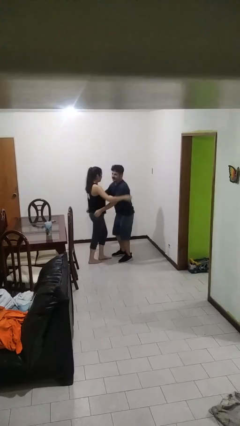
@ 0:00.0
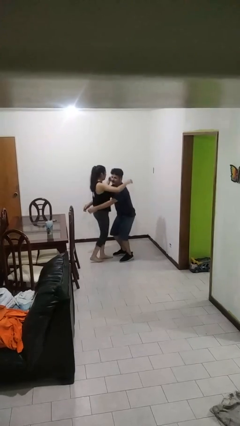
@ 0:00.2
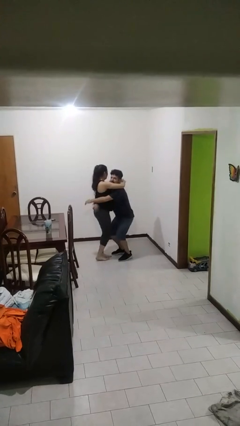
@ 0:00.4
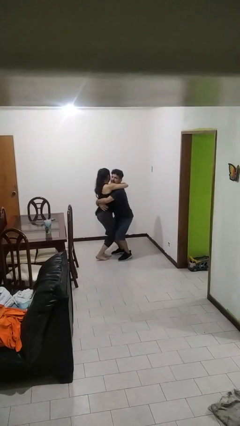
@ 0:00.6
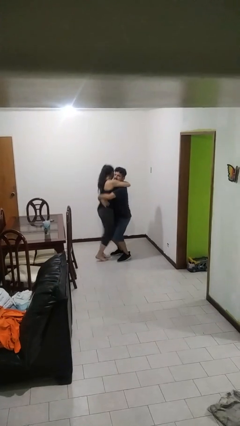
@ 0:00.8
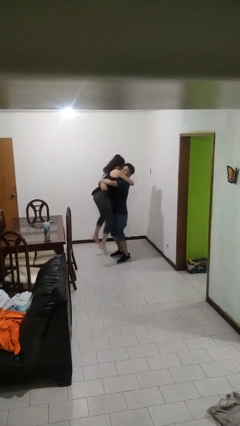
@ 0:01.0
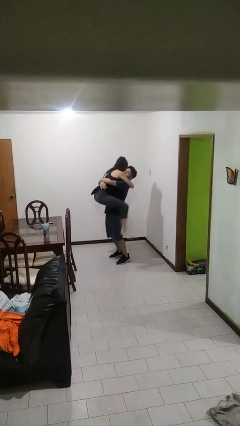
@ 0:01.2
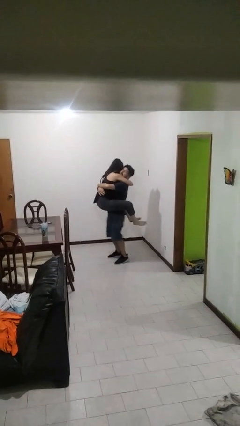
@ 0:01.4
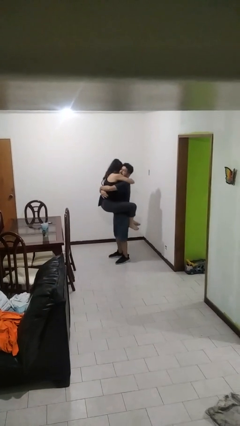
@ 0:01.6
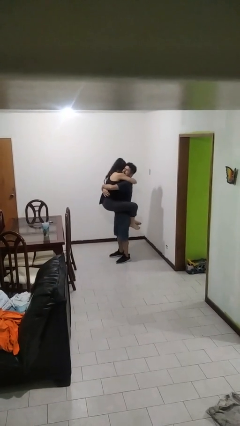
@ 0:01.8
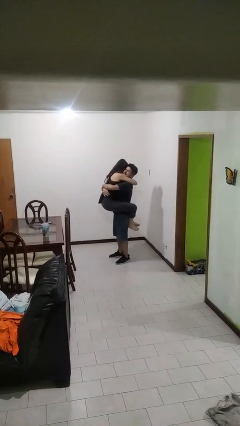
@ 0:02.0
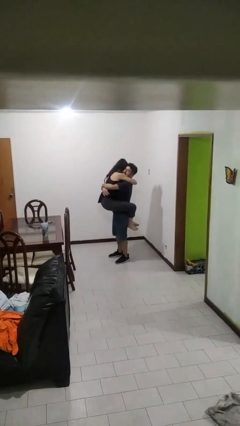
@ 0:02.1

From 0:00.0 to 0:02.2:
person picks up person

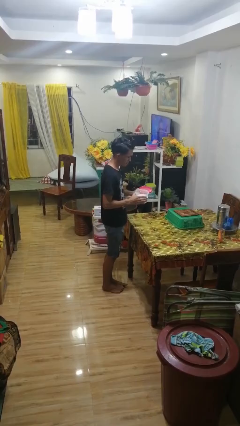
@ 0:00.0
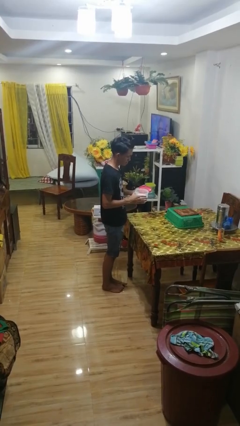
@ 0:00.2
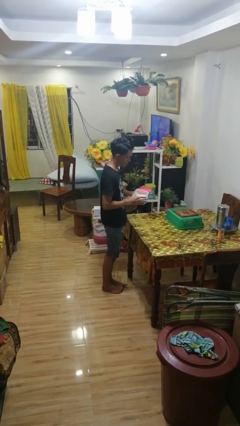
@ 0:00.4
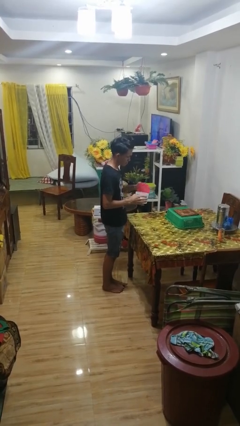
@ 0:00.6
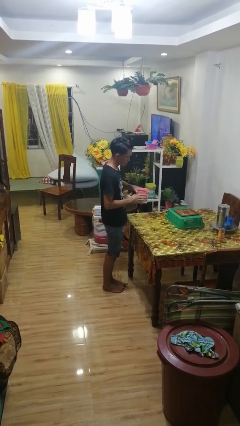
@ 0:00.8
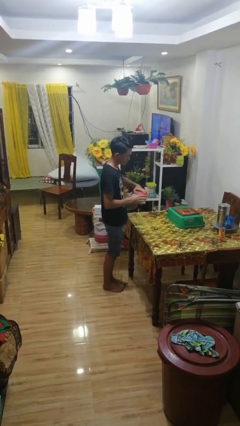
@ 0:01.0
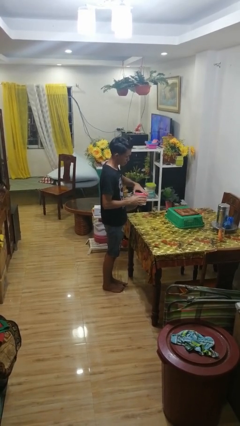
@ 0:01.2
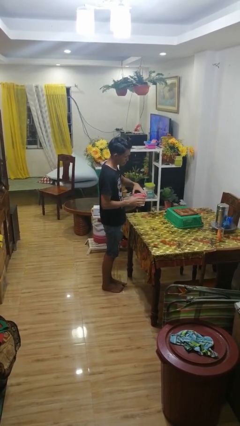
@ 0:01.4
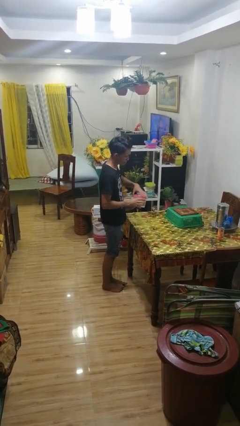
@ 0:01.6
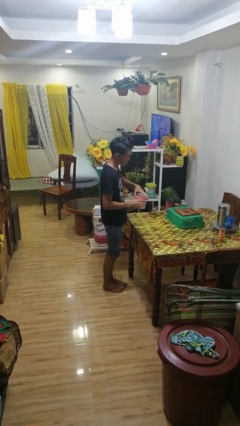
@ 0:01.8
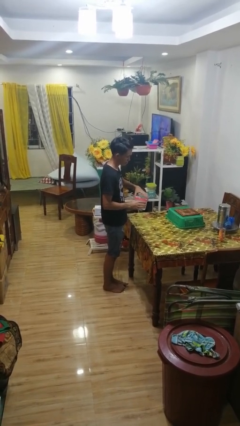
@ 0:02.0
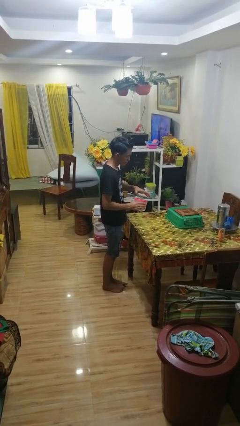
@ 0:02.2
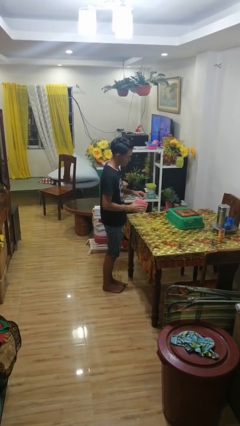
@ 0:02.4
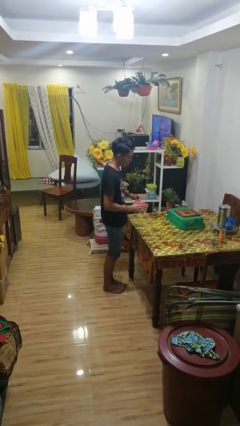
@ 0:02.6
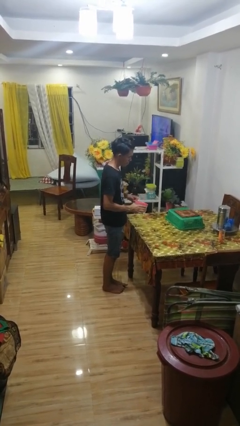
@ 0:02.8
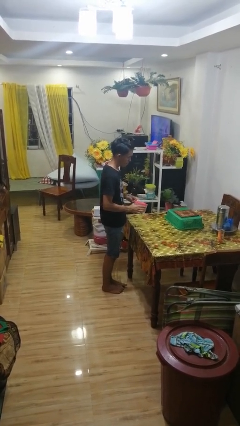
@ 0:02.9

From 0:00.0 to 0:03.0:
person closes jar

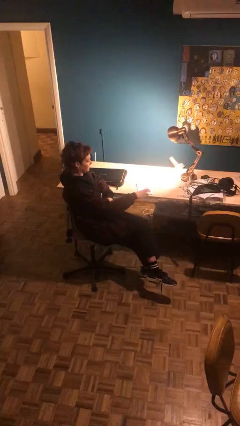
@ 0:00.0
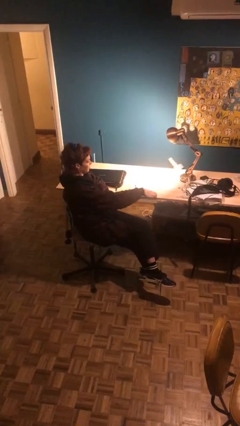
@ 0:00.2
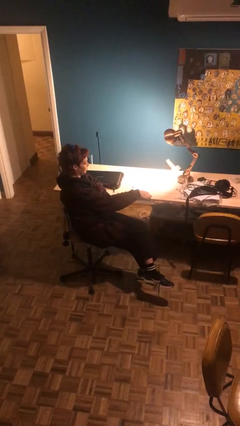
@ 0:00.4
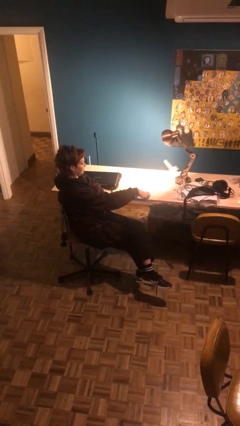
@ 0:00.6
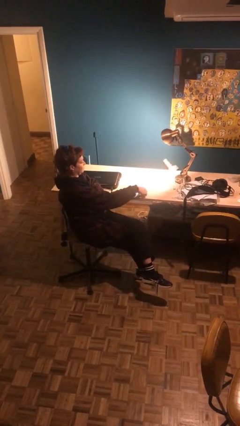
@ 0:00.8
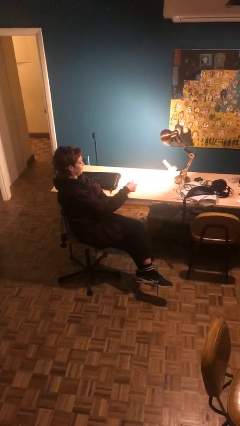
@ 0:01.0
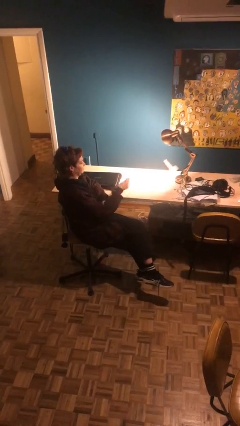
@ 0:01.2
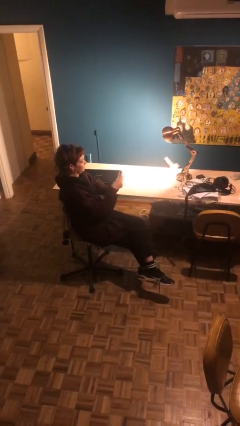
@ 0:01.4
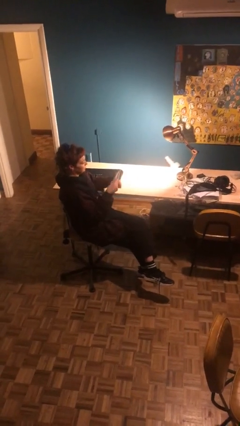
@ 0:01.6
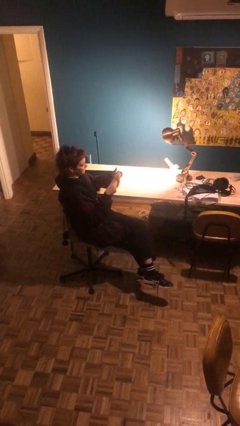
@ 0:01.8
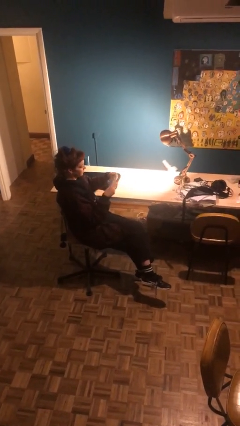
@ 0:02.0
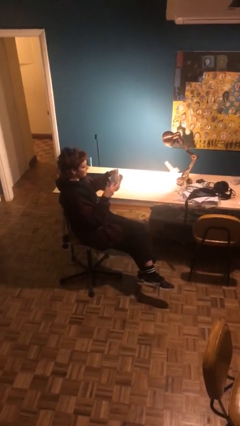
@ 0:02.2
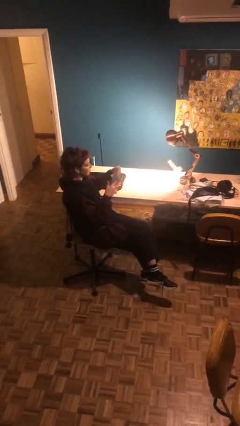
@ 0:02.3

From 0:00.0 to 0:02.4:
person picks up object from table

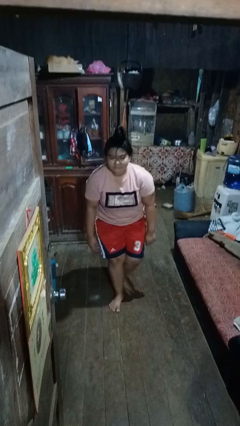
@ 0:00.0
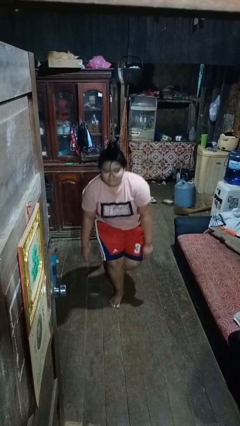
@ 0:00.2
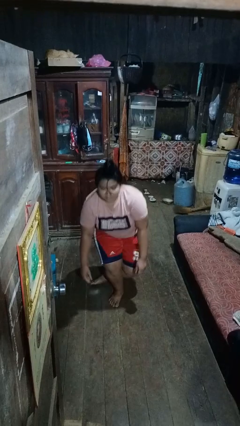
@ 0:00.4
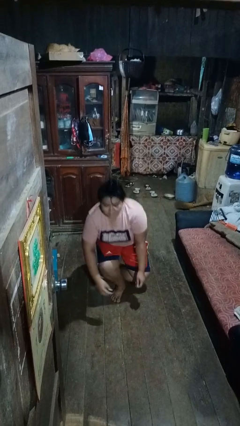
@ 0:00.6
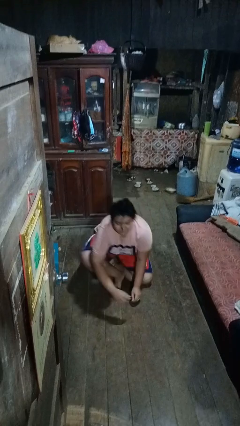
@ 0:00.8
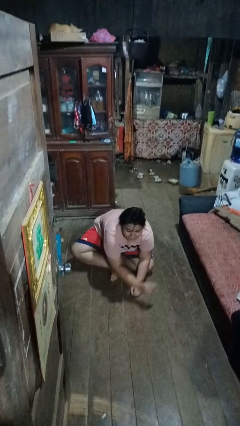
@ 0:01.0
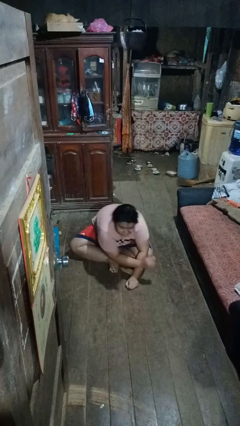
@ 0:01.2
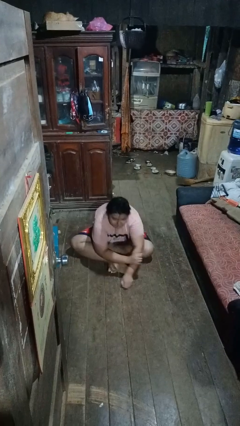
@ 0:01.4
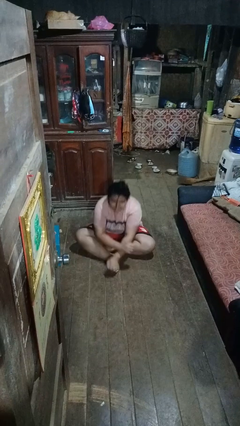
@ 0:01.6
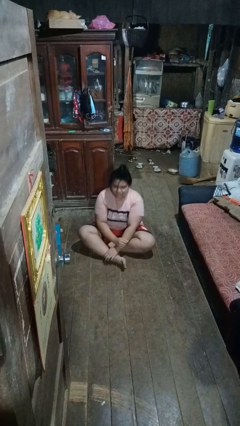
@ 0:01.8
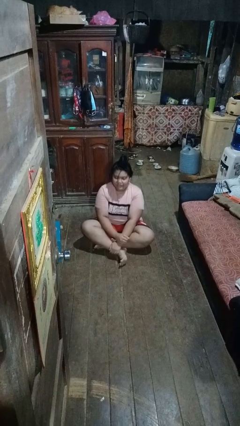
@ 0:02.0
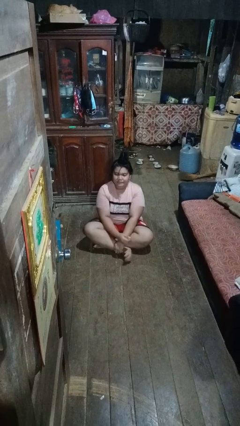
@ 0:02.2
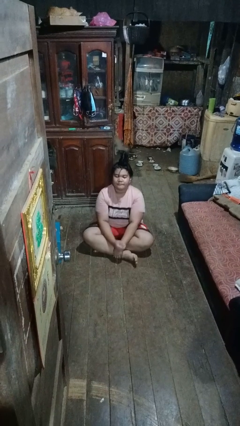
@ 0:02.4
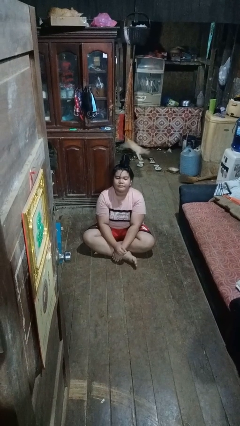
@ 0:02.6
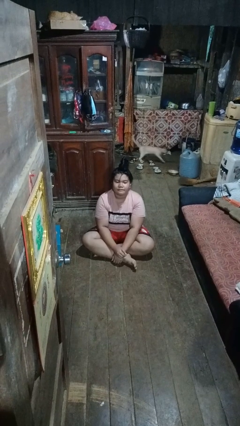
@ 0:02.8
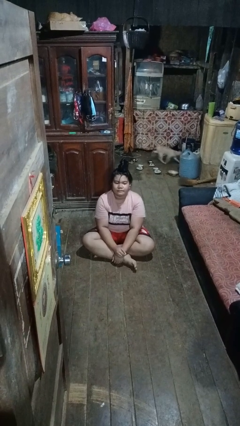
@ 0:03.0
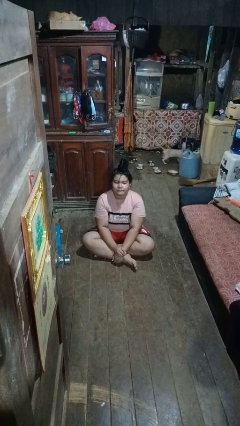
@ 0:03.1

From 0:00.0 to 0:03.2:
person sits crisscross

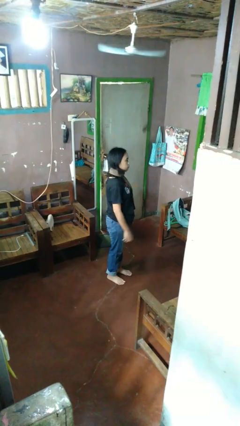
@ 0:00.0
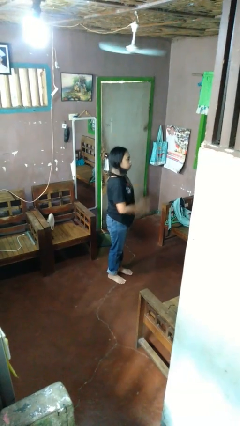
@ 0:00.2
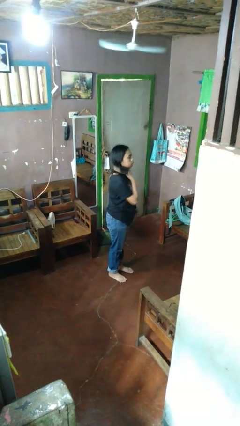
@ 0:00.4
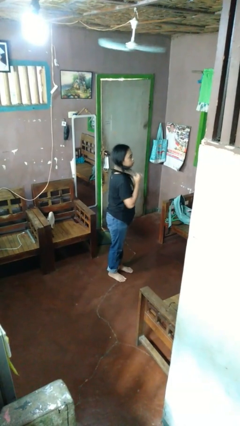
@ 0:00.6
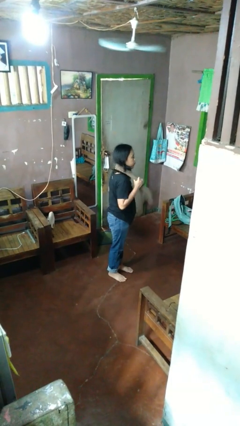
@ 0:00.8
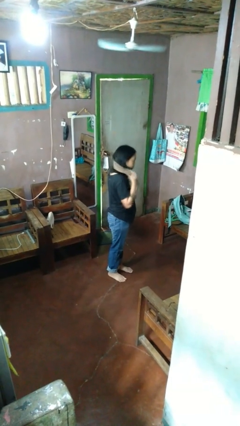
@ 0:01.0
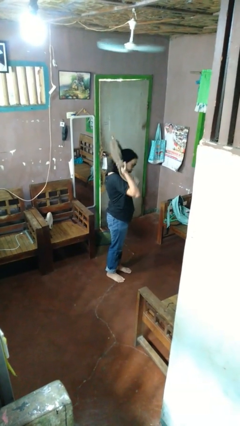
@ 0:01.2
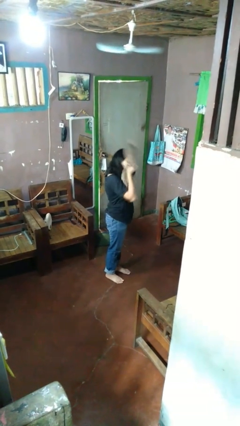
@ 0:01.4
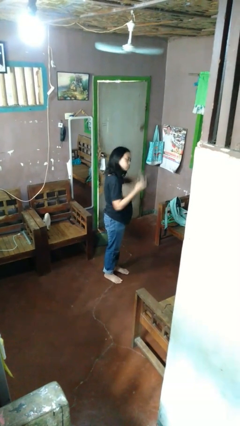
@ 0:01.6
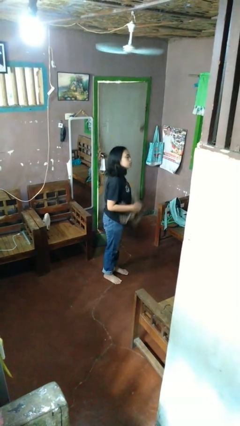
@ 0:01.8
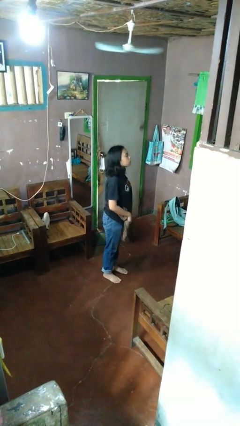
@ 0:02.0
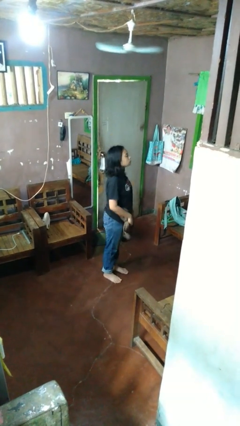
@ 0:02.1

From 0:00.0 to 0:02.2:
person takes off scarf

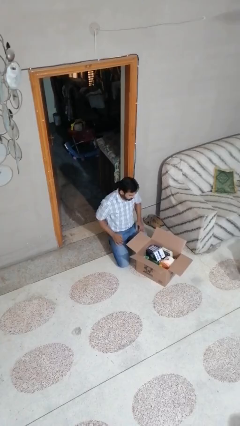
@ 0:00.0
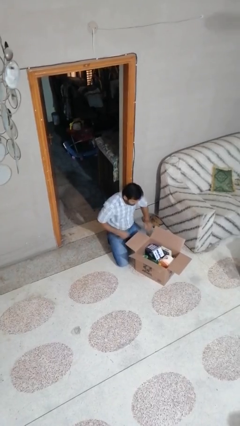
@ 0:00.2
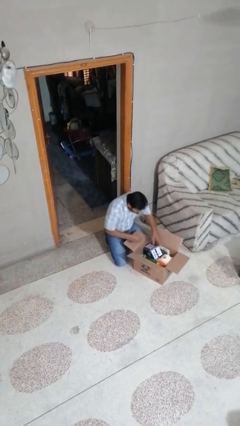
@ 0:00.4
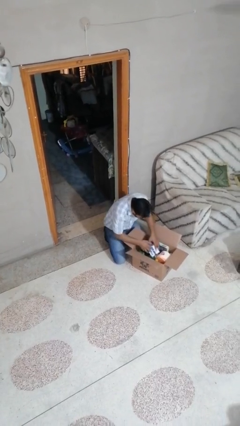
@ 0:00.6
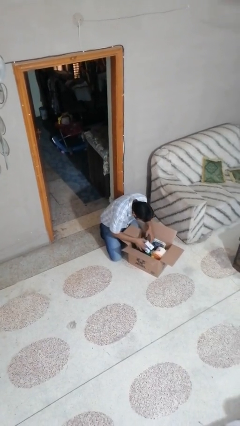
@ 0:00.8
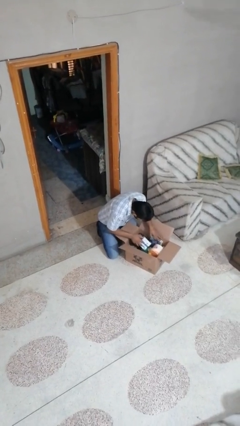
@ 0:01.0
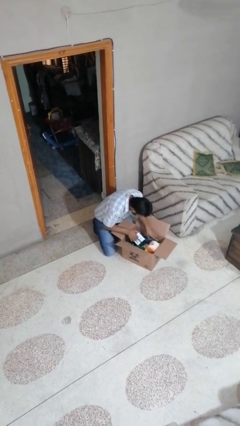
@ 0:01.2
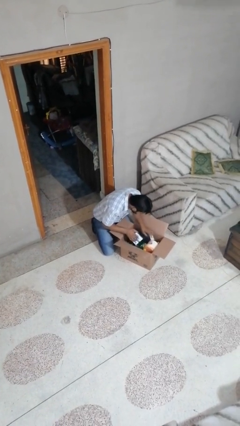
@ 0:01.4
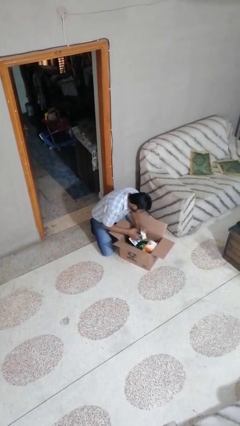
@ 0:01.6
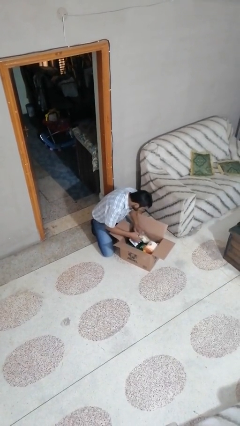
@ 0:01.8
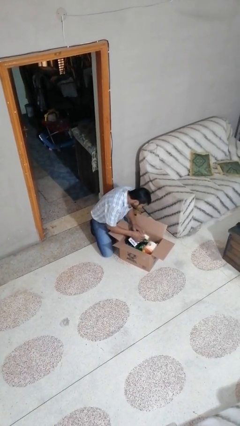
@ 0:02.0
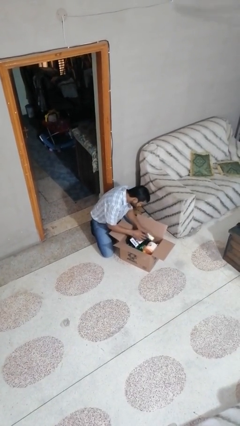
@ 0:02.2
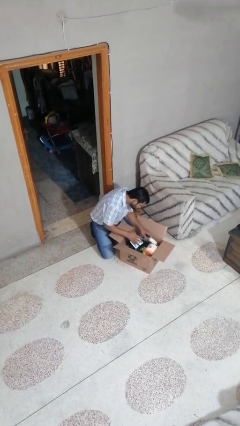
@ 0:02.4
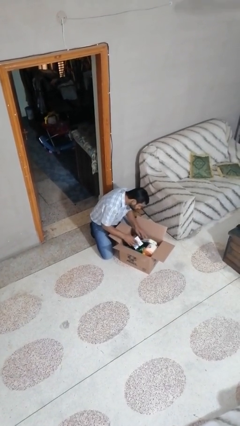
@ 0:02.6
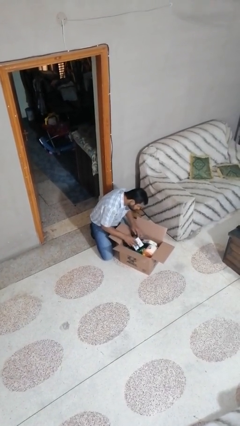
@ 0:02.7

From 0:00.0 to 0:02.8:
person searches in box

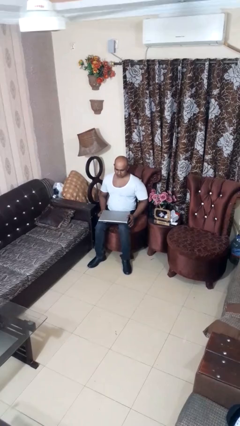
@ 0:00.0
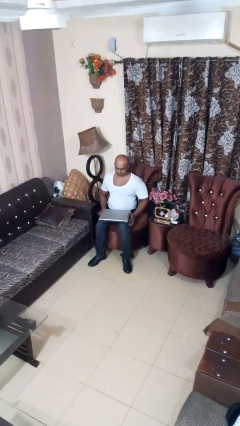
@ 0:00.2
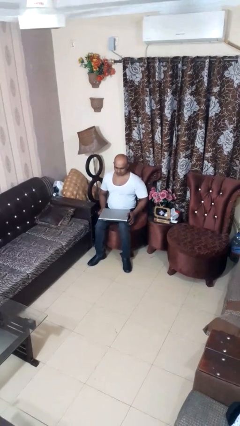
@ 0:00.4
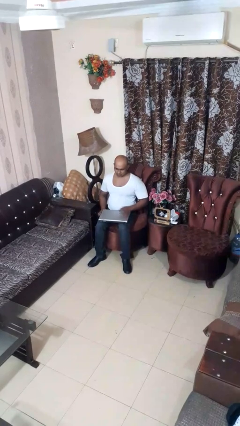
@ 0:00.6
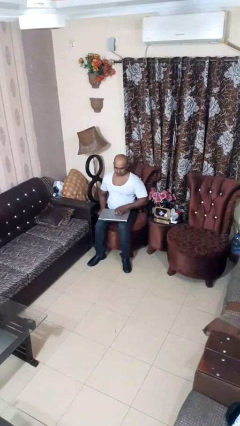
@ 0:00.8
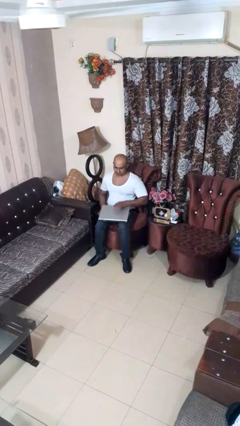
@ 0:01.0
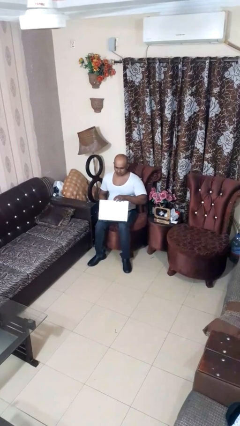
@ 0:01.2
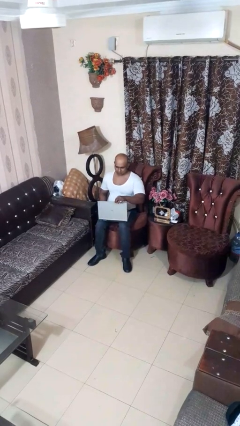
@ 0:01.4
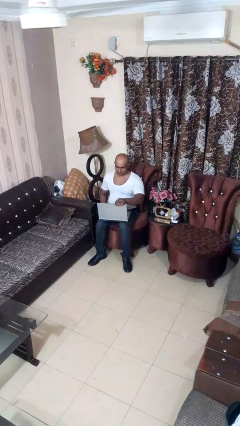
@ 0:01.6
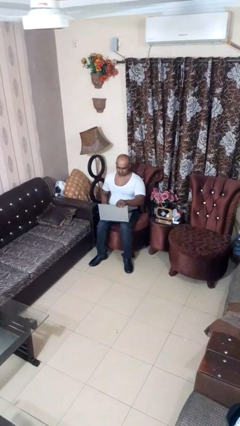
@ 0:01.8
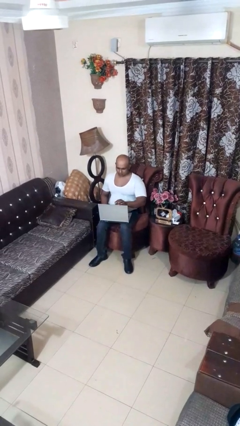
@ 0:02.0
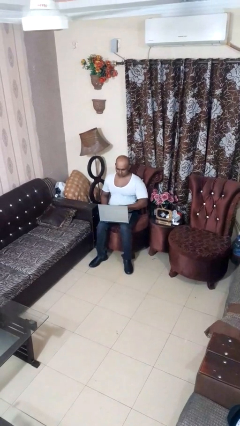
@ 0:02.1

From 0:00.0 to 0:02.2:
person opens laptop
